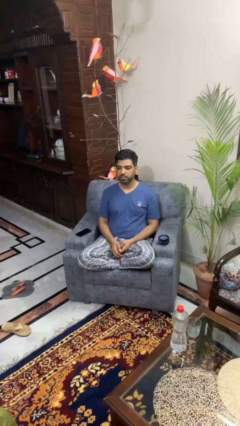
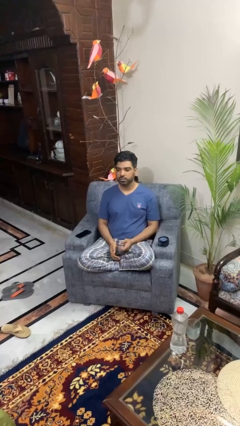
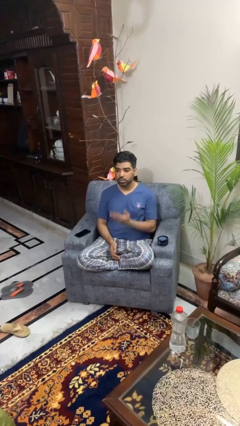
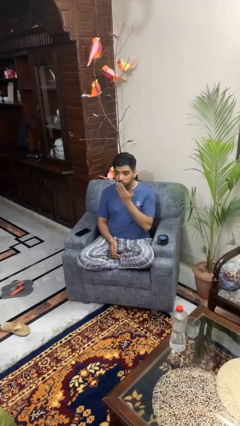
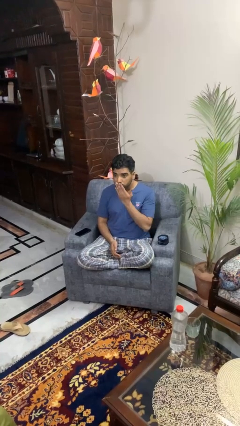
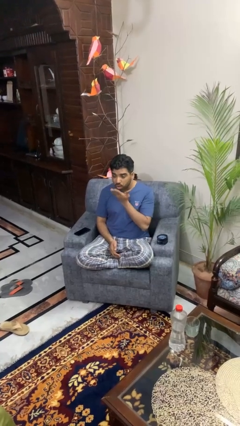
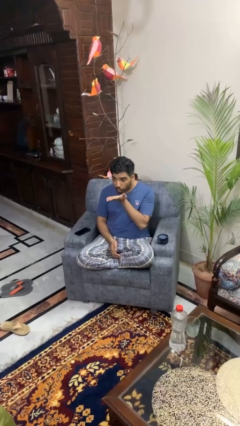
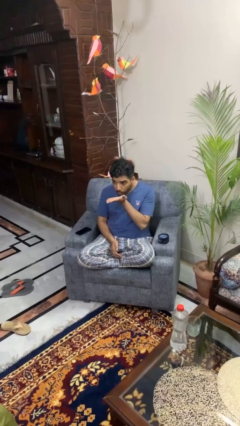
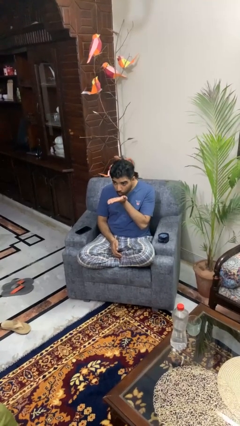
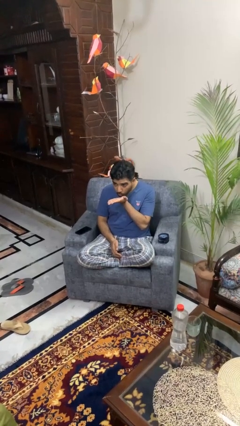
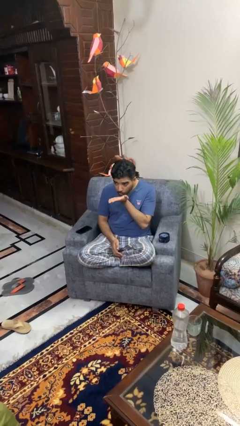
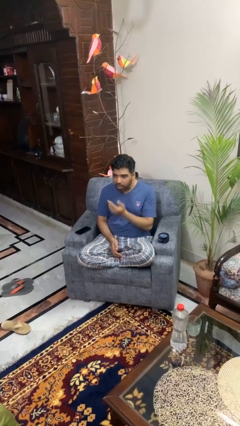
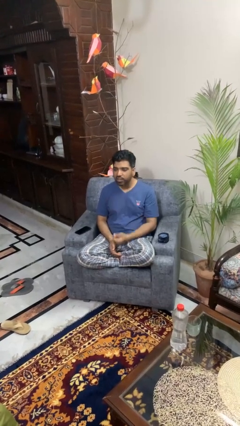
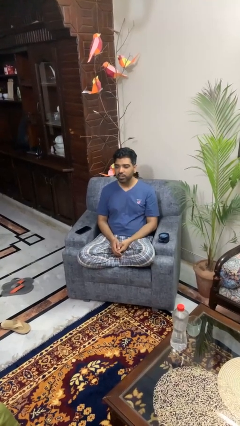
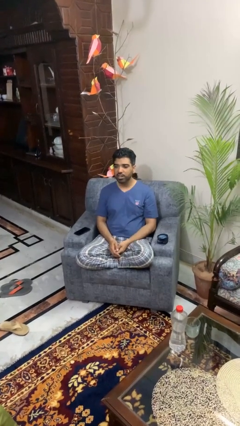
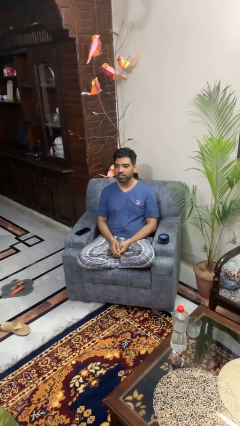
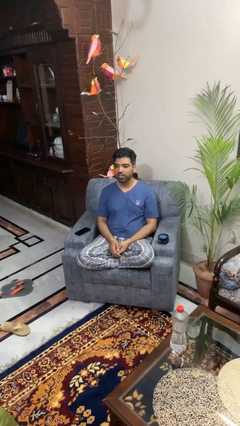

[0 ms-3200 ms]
person gestures blow kiss

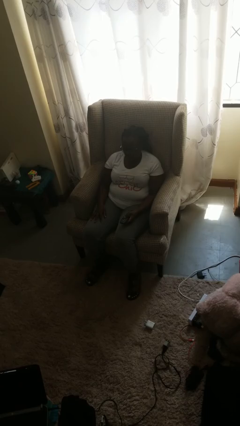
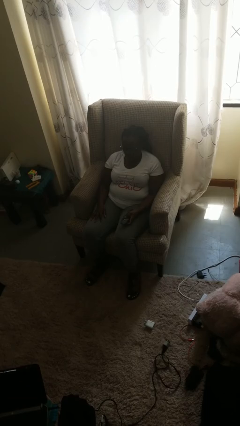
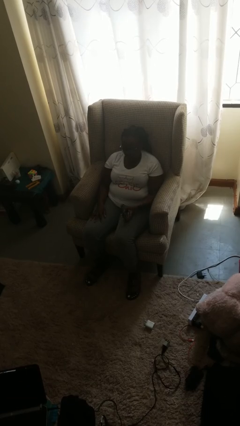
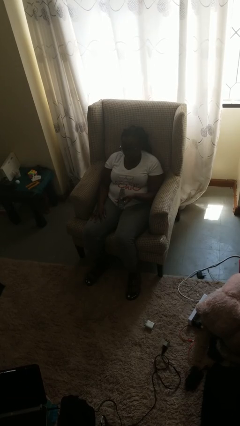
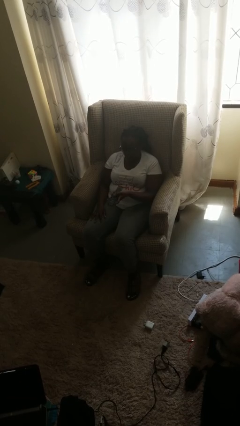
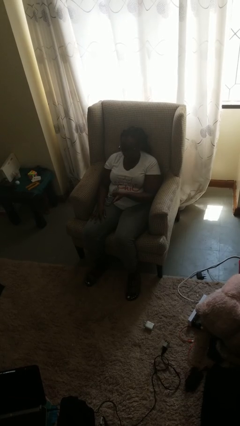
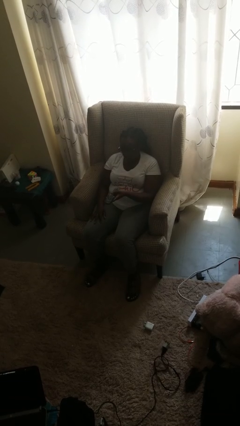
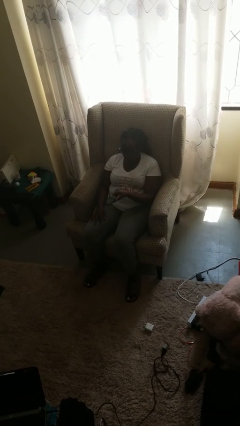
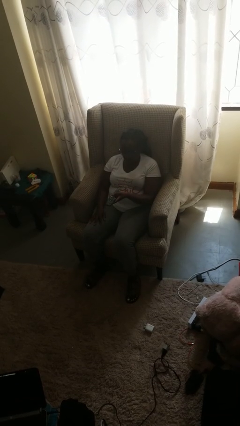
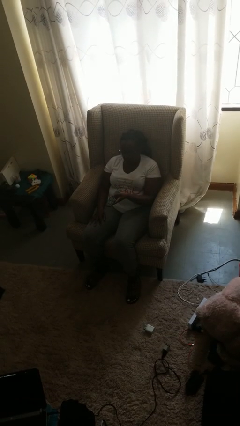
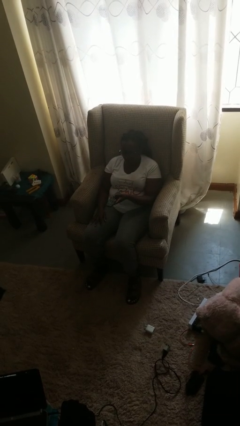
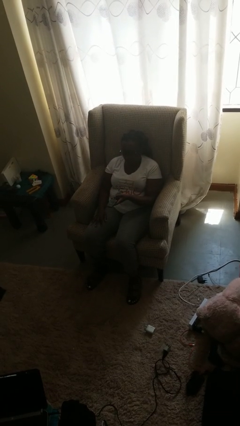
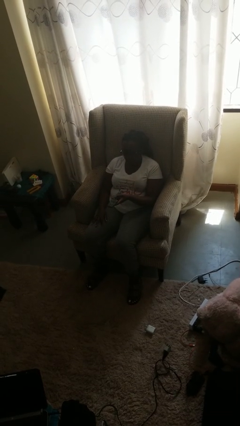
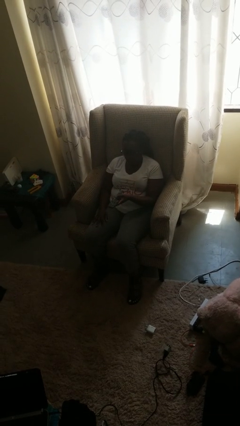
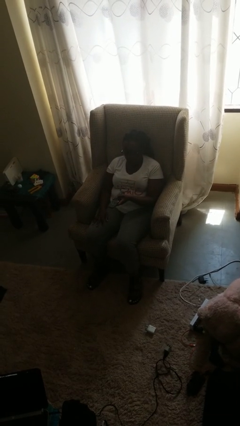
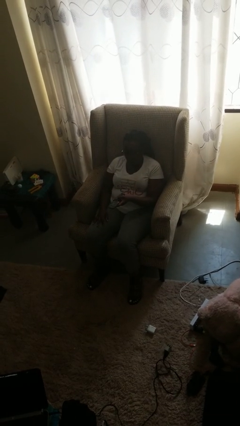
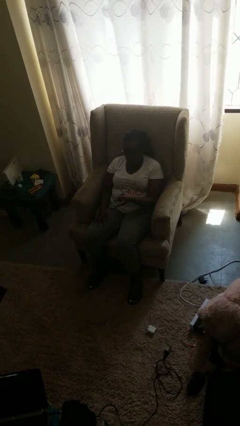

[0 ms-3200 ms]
person uses television remote

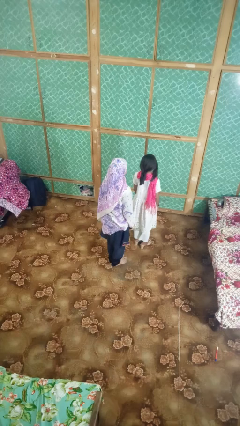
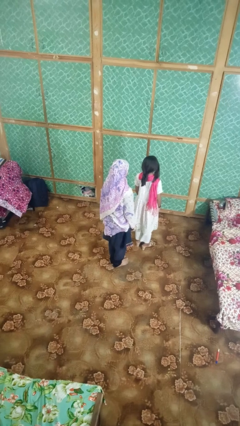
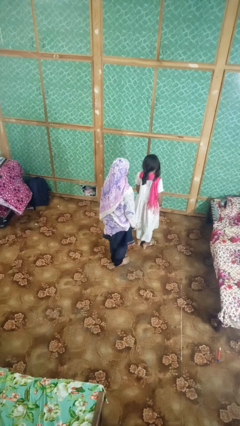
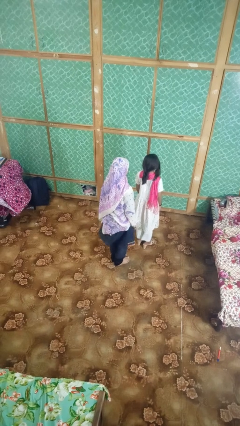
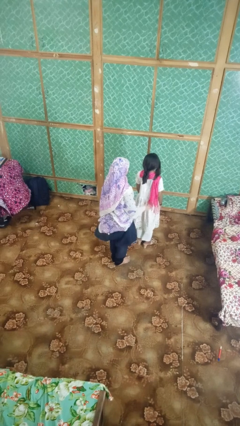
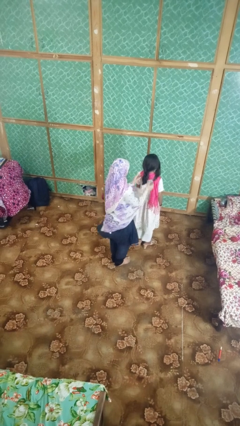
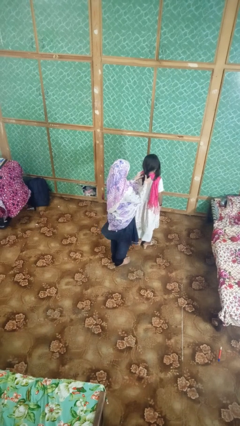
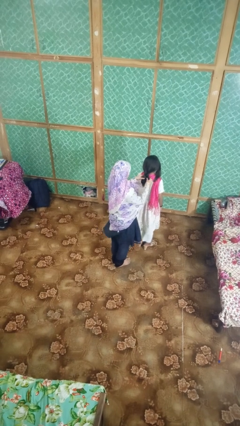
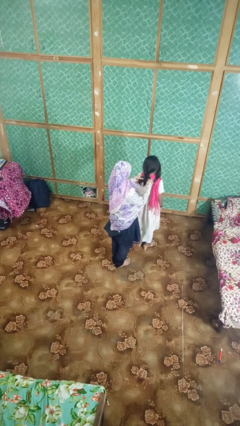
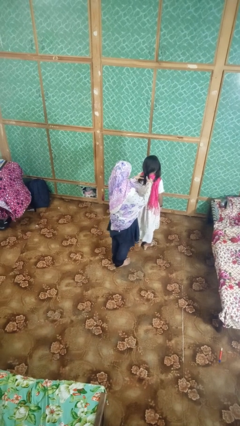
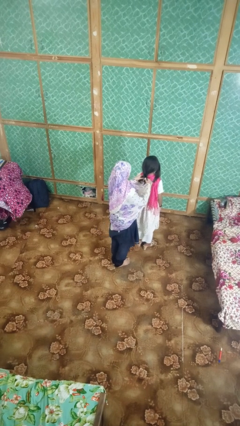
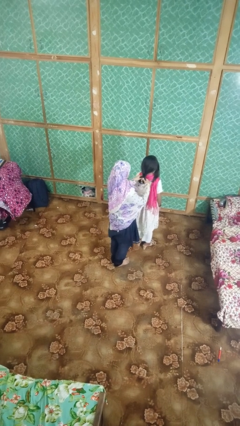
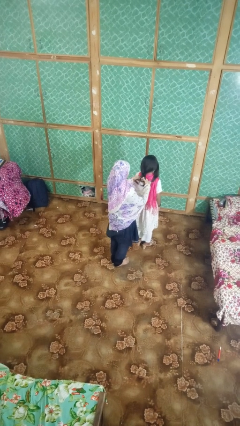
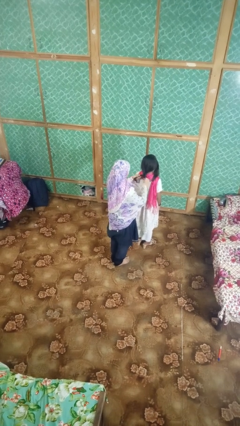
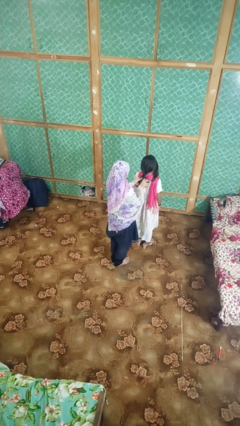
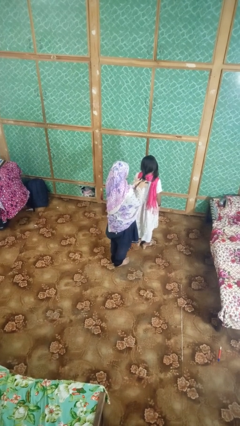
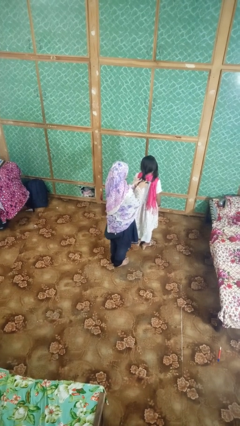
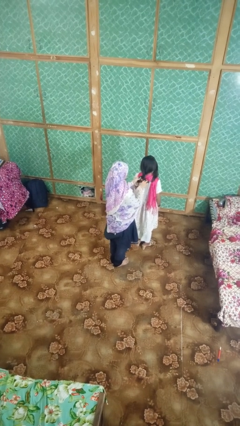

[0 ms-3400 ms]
person braids hair of person

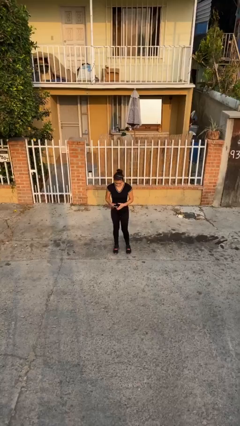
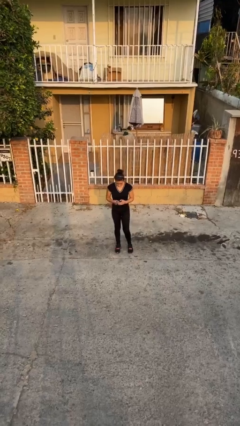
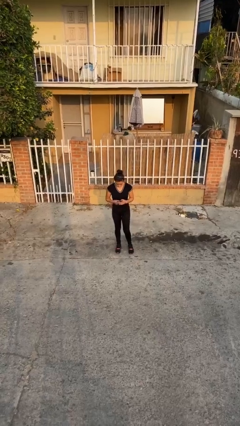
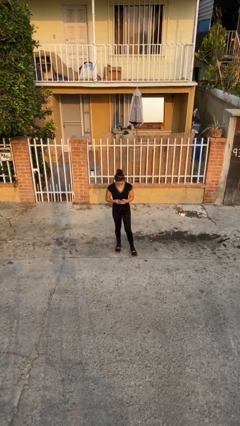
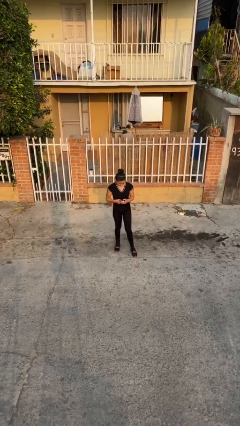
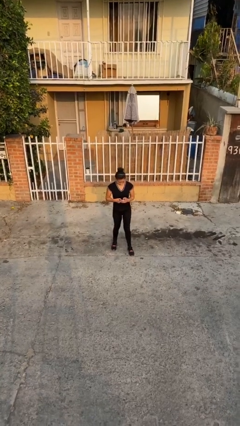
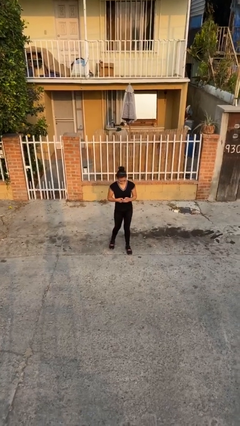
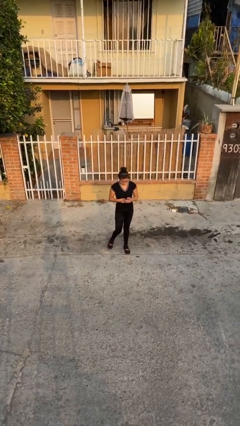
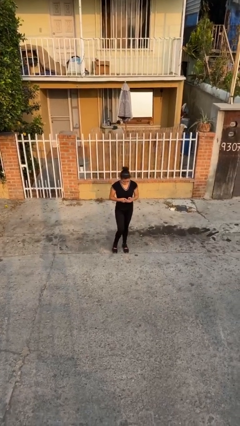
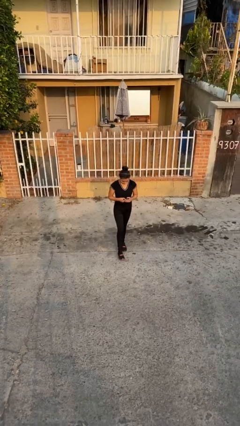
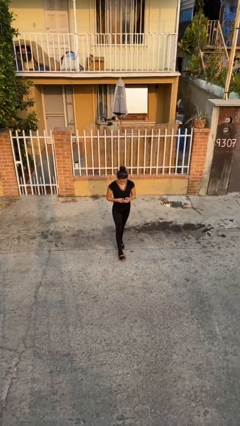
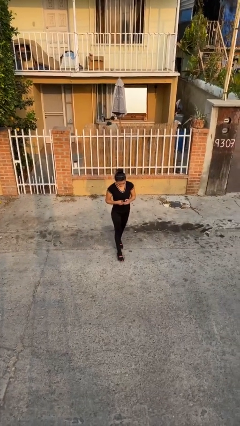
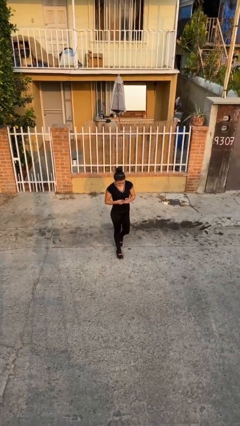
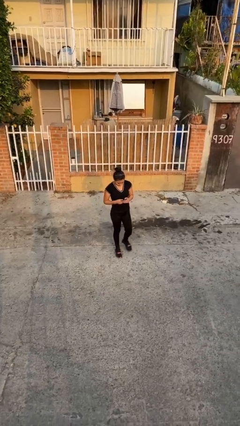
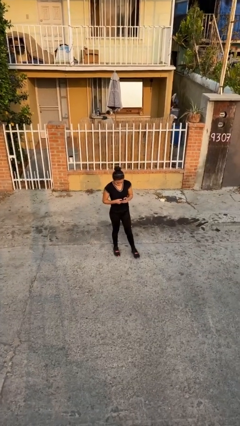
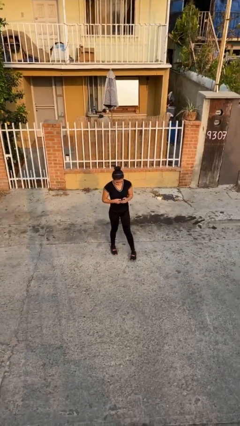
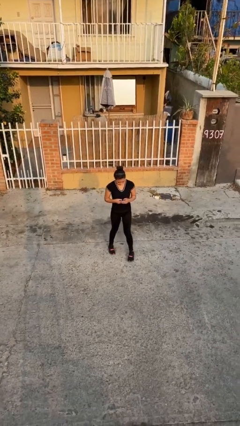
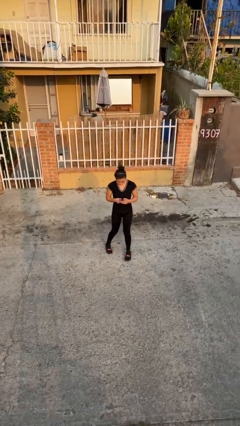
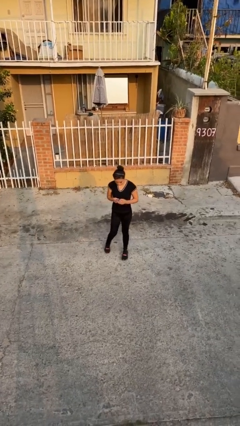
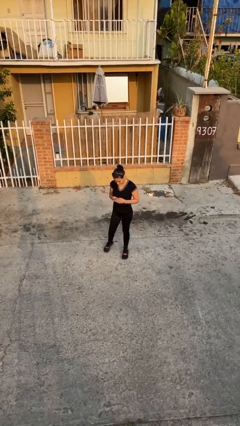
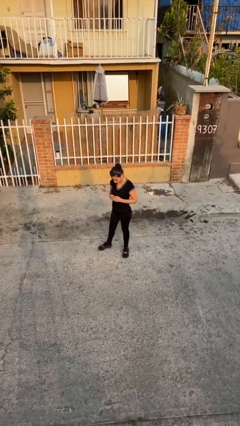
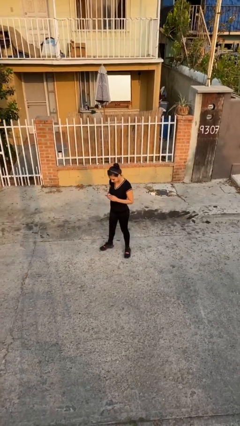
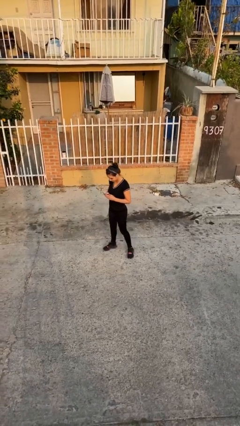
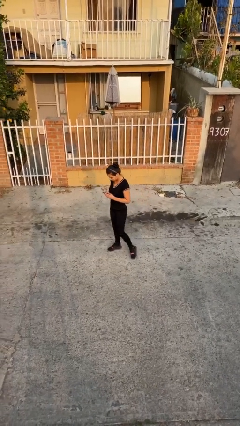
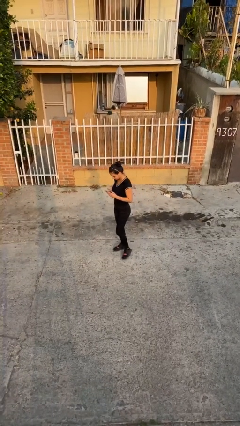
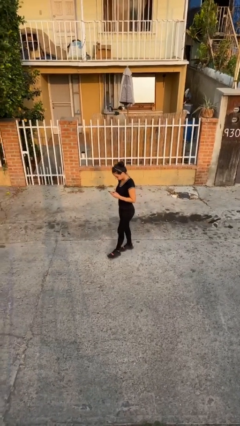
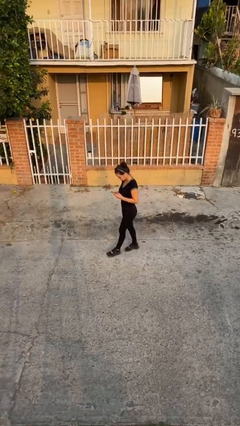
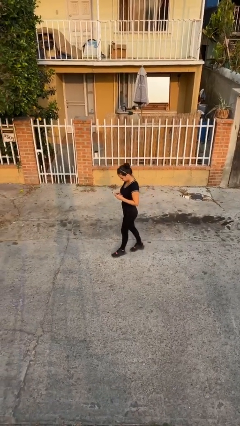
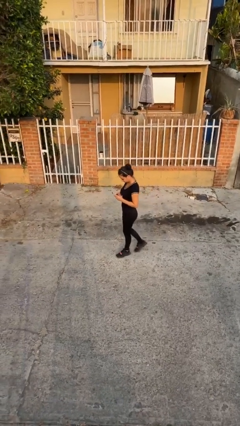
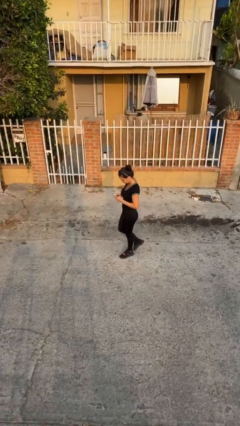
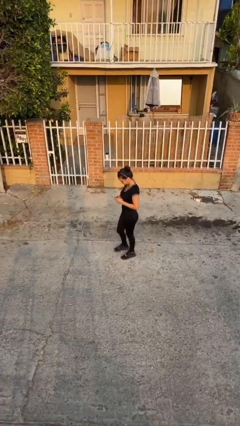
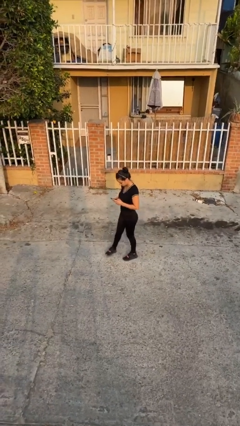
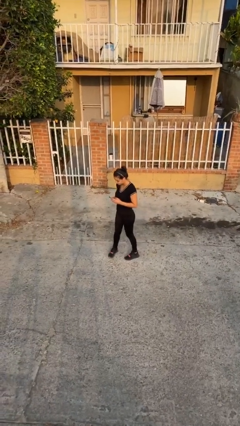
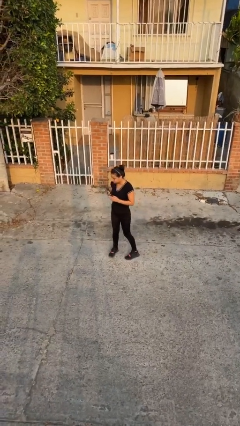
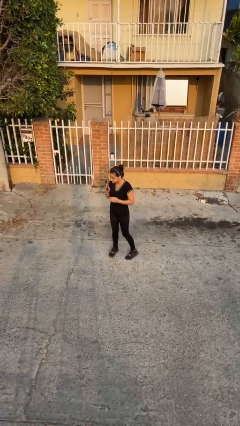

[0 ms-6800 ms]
person texts on phone

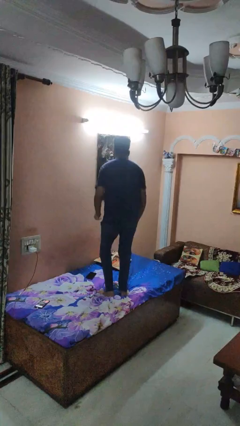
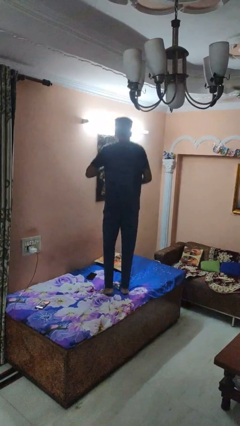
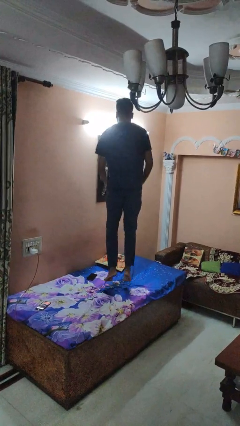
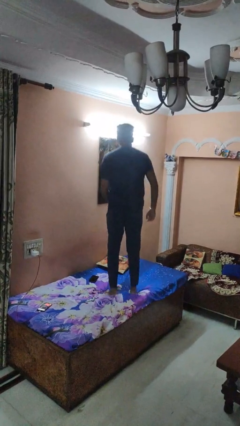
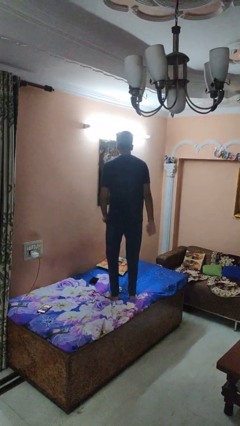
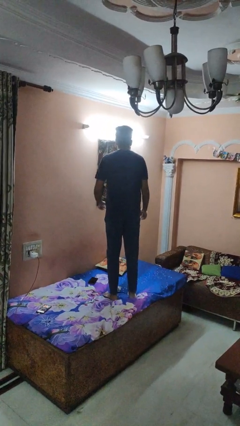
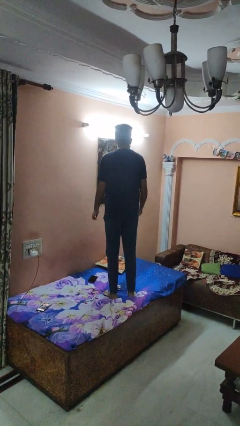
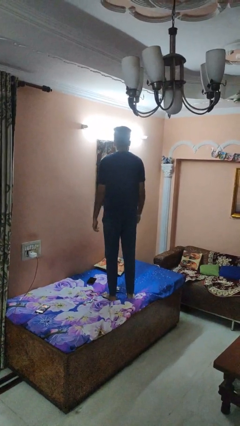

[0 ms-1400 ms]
person jumps on bed
